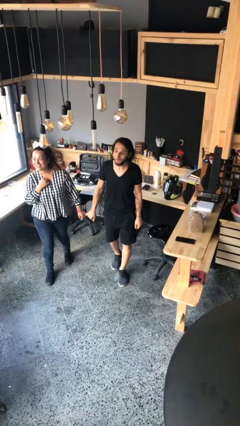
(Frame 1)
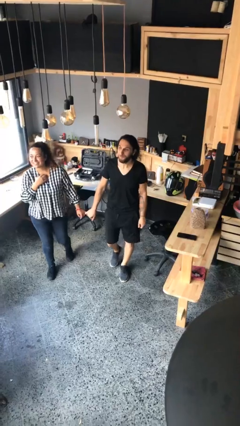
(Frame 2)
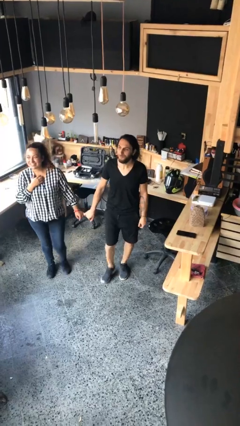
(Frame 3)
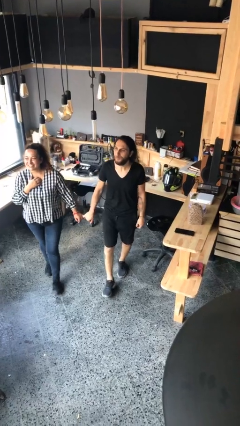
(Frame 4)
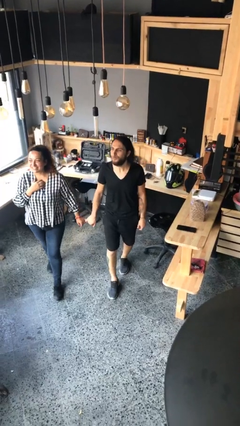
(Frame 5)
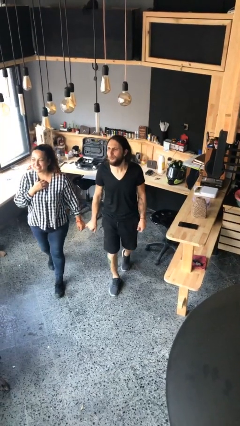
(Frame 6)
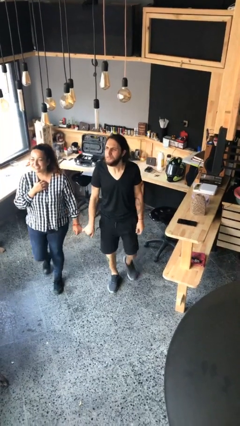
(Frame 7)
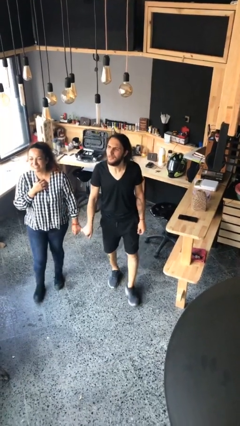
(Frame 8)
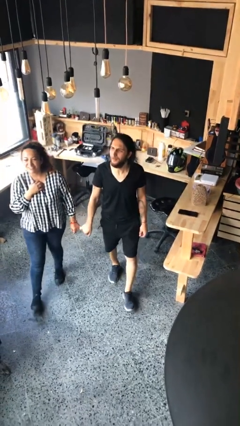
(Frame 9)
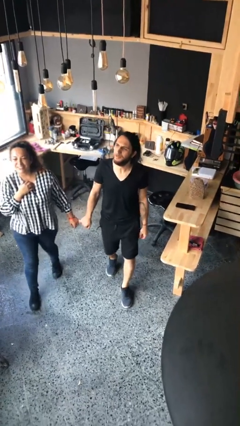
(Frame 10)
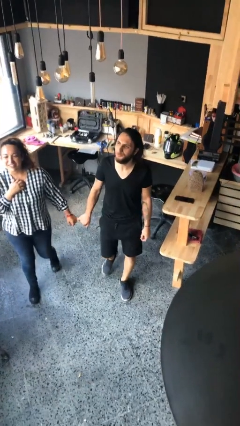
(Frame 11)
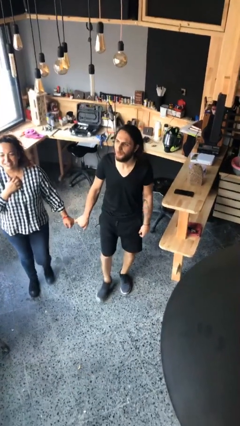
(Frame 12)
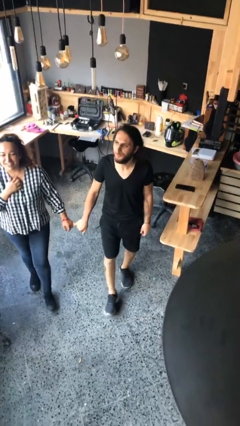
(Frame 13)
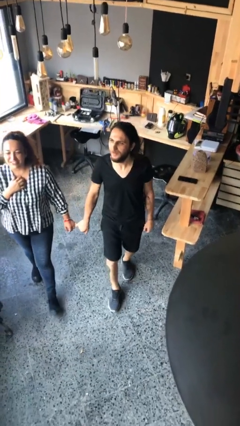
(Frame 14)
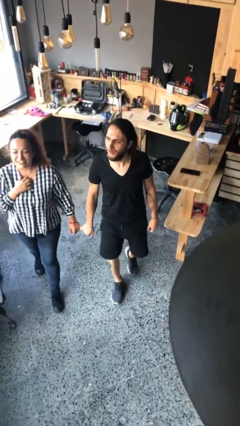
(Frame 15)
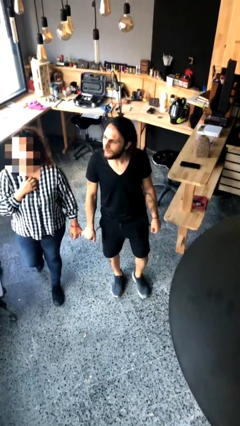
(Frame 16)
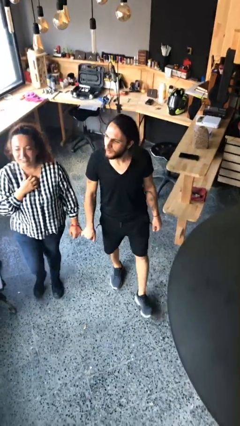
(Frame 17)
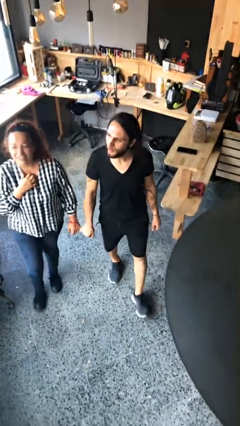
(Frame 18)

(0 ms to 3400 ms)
person holds hand

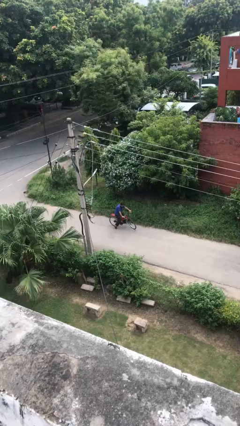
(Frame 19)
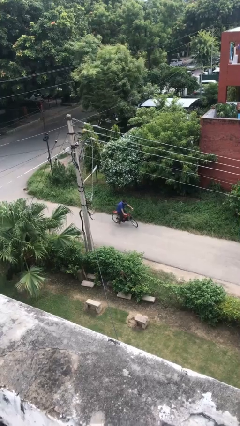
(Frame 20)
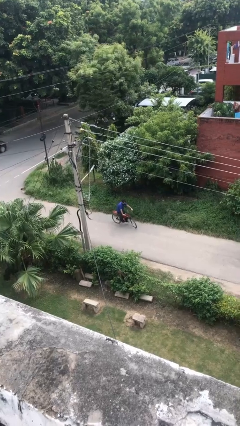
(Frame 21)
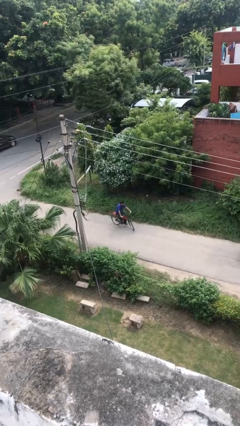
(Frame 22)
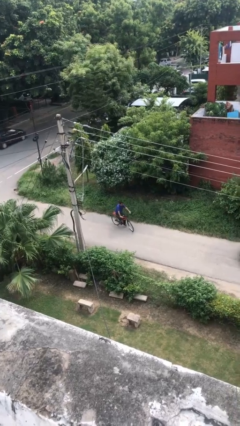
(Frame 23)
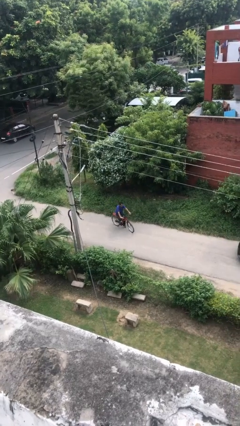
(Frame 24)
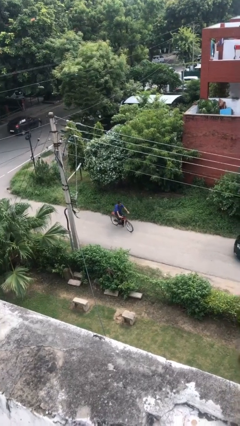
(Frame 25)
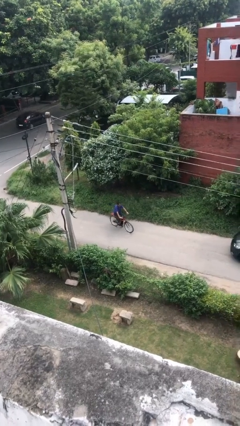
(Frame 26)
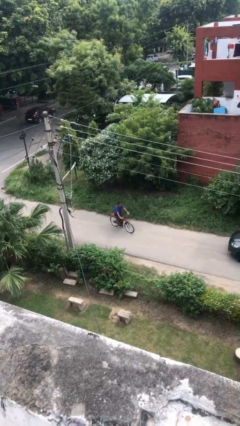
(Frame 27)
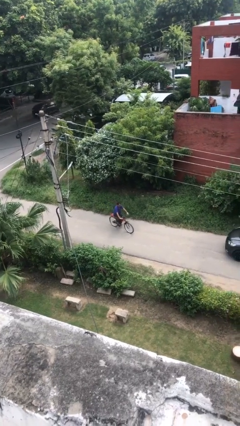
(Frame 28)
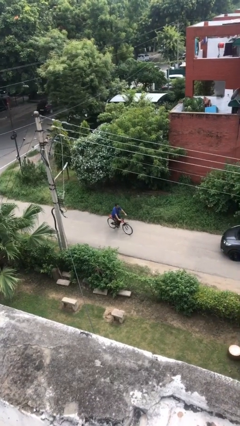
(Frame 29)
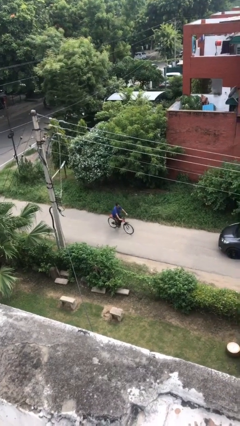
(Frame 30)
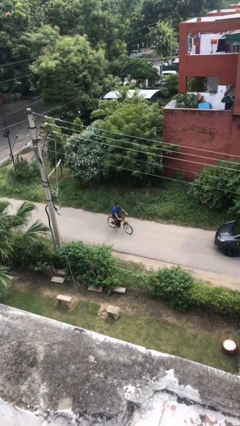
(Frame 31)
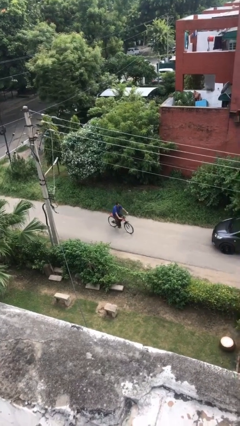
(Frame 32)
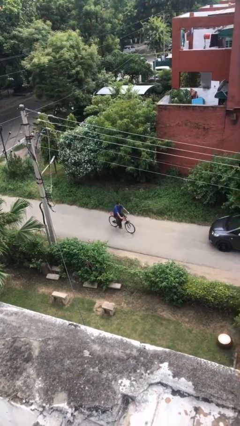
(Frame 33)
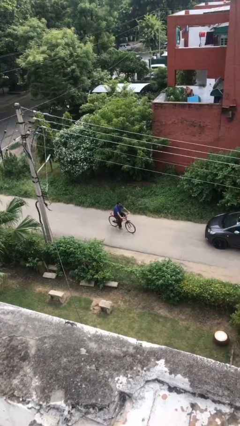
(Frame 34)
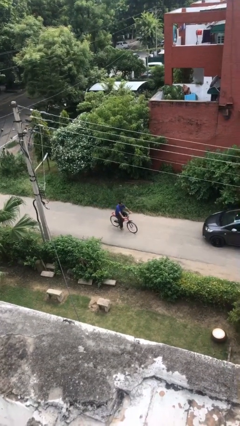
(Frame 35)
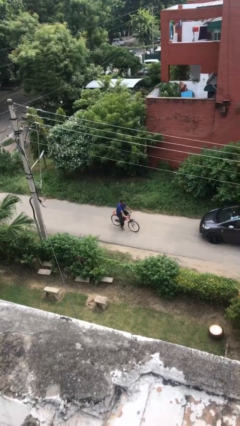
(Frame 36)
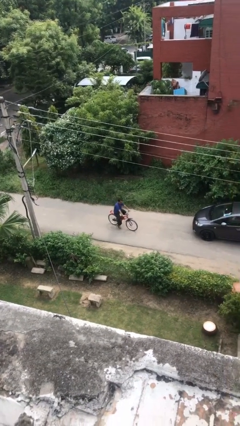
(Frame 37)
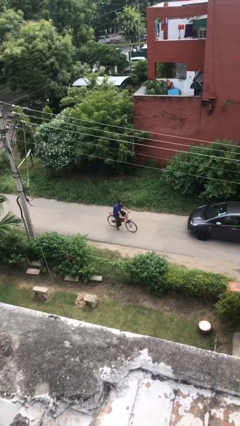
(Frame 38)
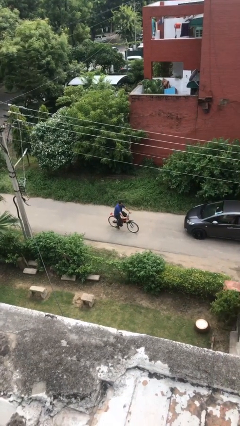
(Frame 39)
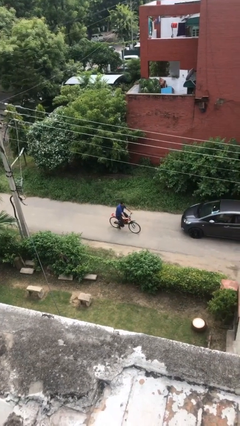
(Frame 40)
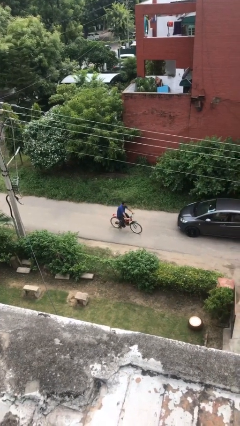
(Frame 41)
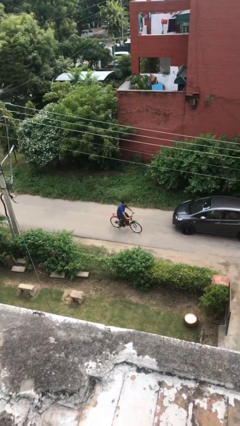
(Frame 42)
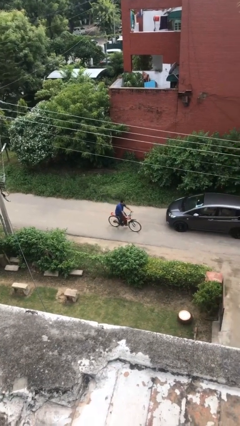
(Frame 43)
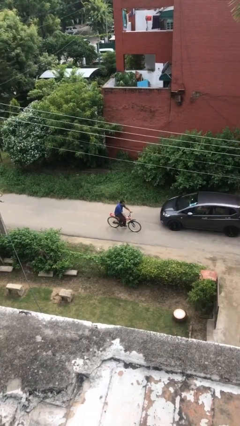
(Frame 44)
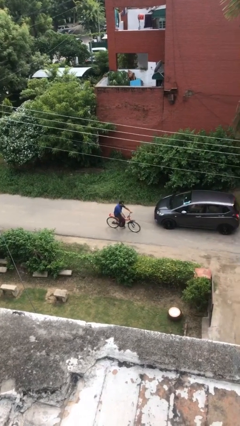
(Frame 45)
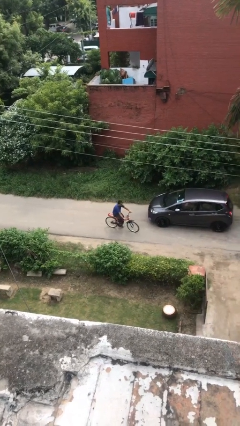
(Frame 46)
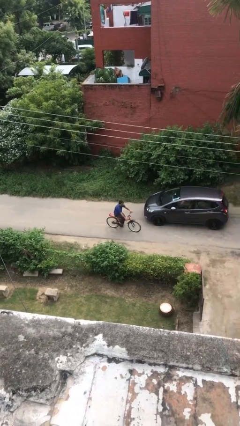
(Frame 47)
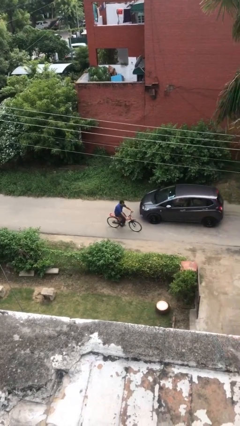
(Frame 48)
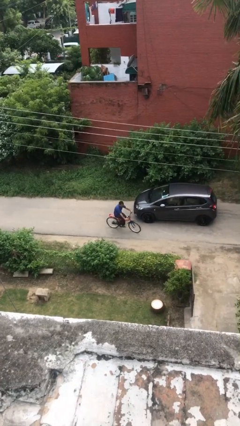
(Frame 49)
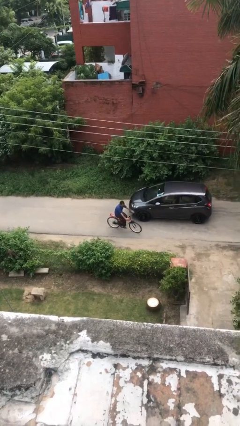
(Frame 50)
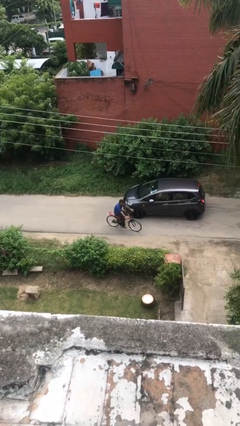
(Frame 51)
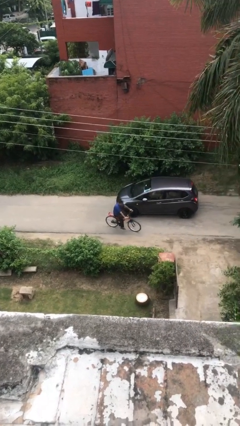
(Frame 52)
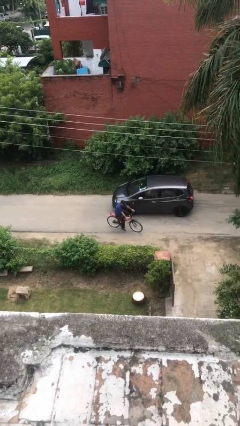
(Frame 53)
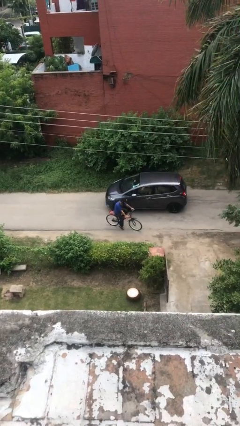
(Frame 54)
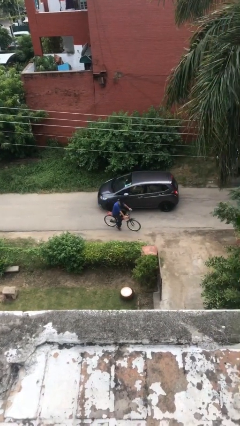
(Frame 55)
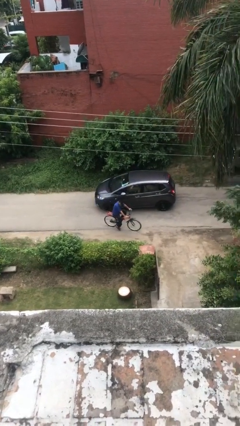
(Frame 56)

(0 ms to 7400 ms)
person rides bicycle

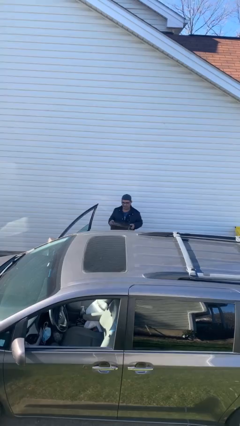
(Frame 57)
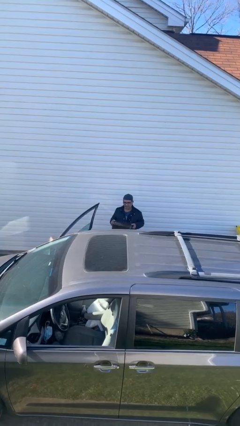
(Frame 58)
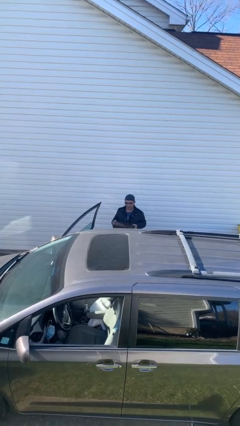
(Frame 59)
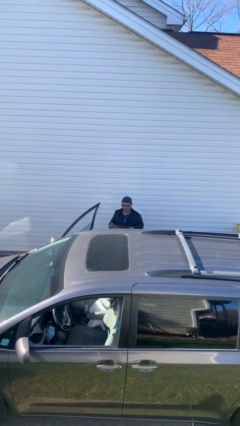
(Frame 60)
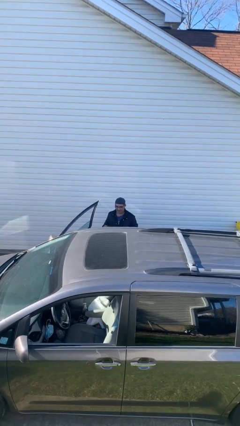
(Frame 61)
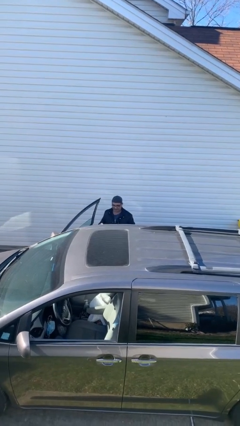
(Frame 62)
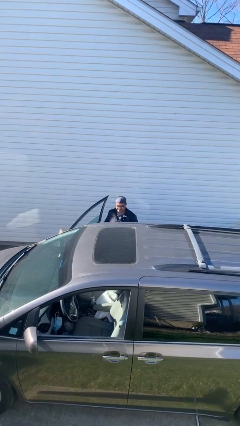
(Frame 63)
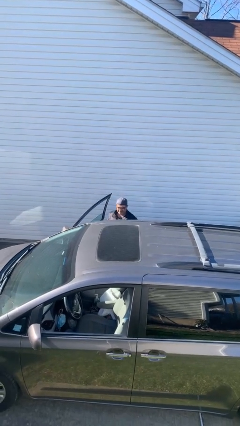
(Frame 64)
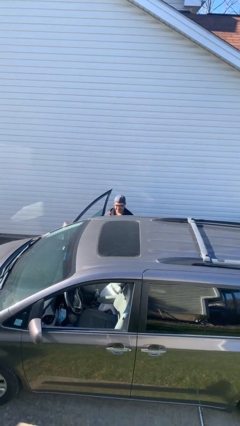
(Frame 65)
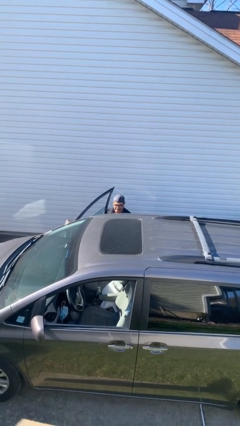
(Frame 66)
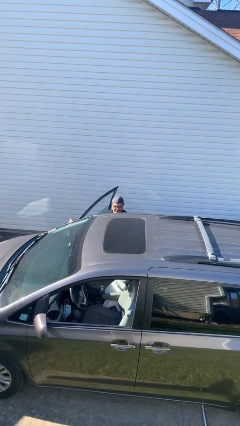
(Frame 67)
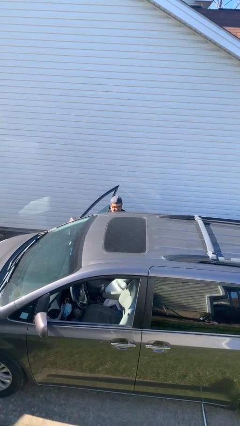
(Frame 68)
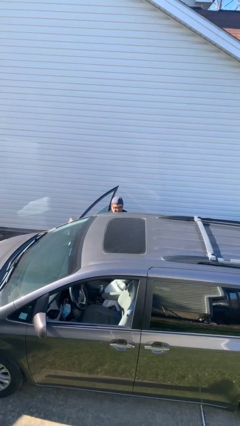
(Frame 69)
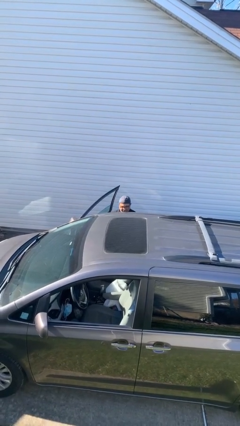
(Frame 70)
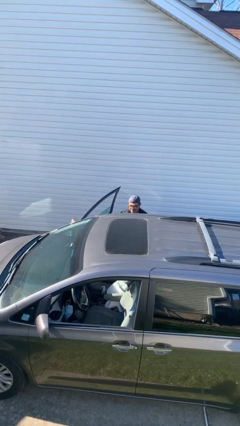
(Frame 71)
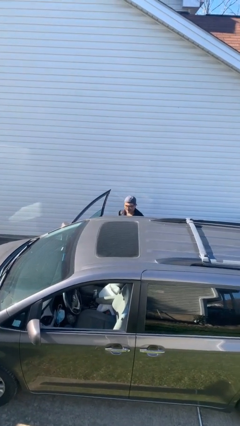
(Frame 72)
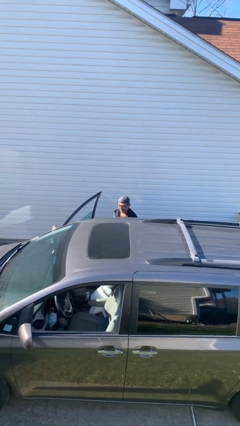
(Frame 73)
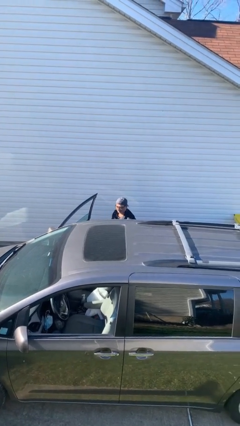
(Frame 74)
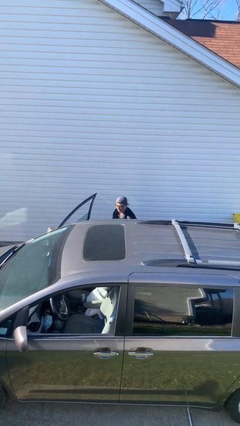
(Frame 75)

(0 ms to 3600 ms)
person loads car

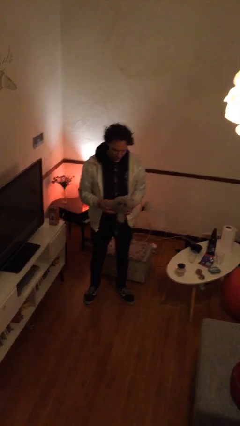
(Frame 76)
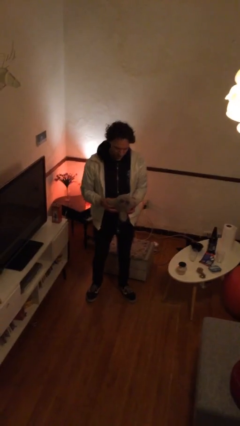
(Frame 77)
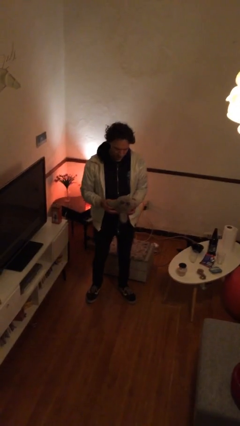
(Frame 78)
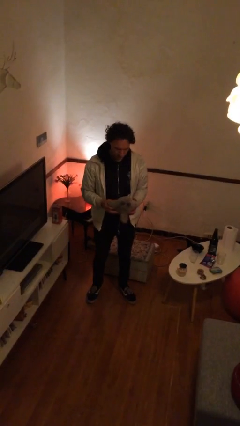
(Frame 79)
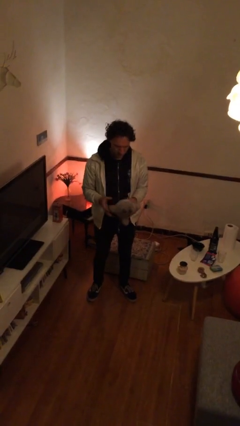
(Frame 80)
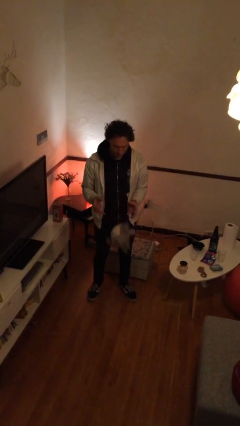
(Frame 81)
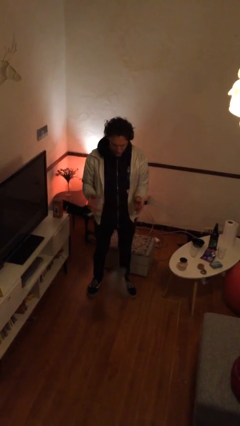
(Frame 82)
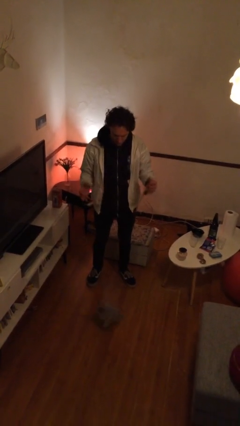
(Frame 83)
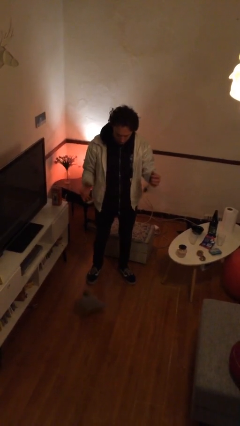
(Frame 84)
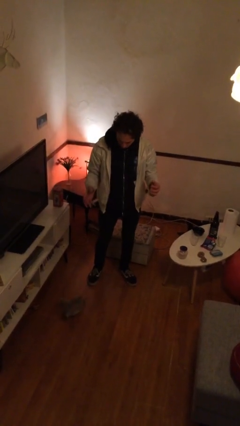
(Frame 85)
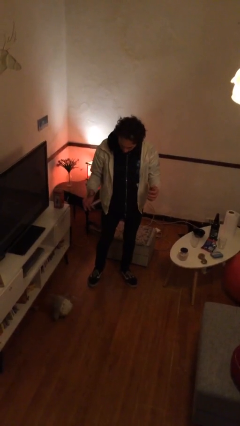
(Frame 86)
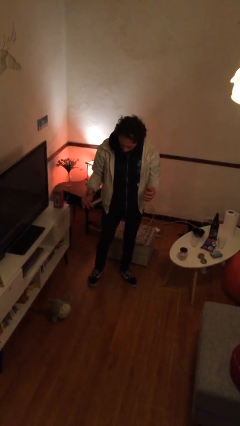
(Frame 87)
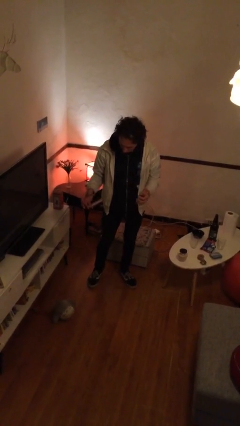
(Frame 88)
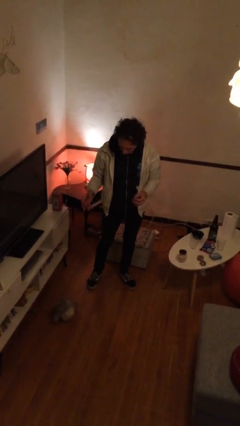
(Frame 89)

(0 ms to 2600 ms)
person drops object

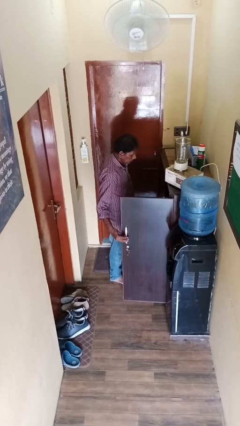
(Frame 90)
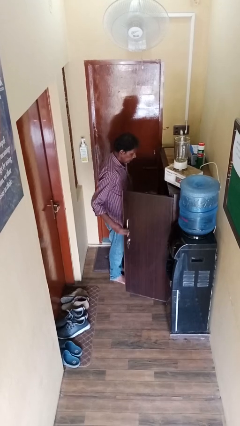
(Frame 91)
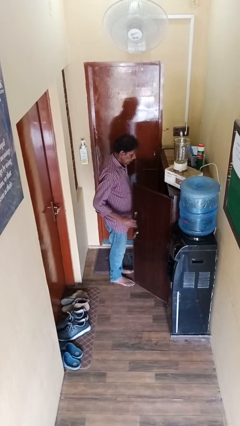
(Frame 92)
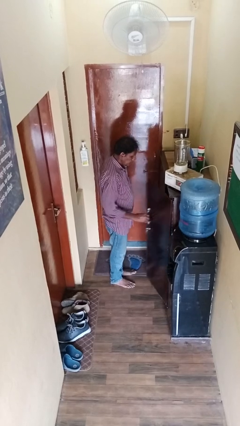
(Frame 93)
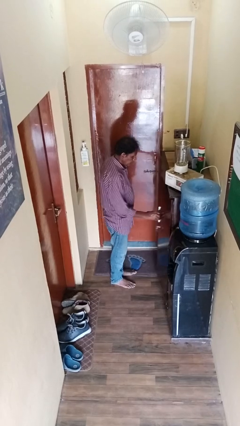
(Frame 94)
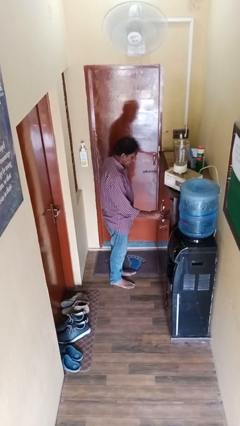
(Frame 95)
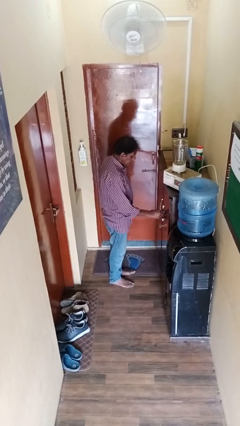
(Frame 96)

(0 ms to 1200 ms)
person closes cabinet

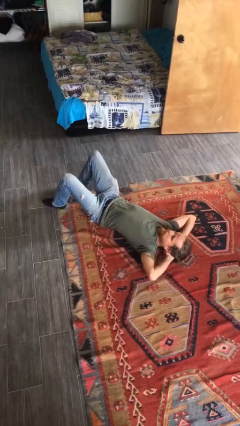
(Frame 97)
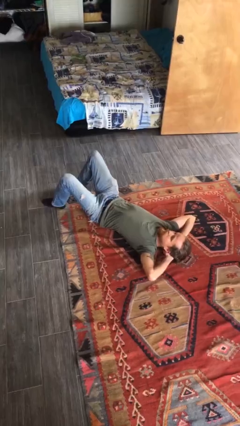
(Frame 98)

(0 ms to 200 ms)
person exercises with situp
